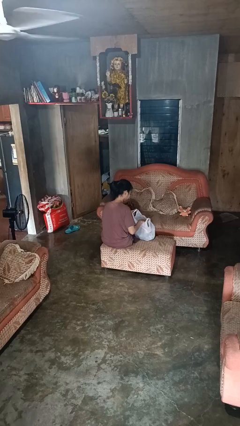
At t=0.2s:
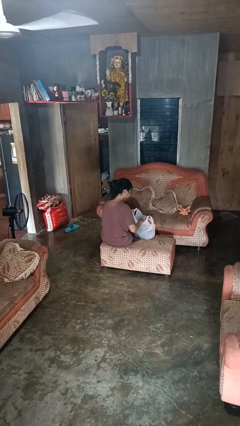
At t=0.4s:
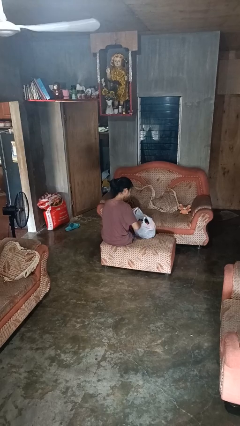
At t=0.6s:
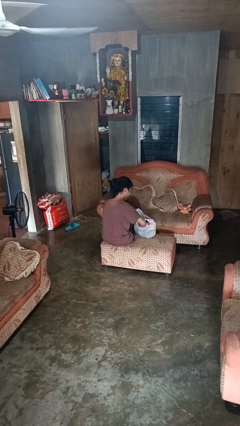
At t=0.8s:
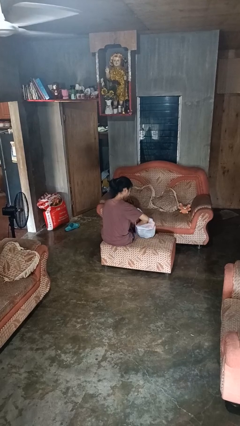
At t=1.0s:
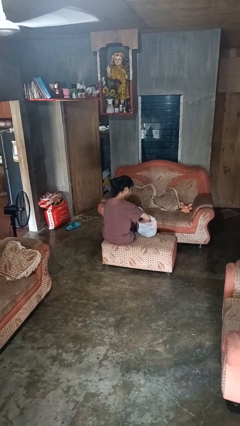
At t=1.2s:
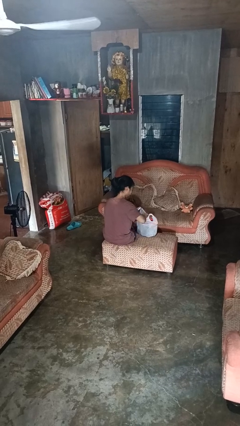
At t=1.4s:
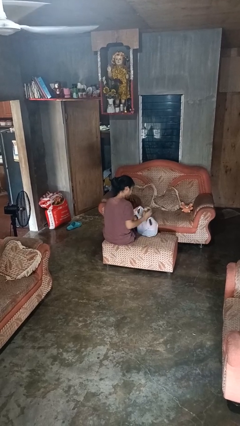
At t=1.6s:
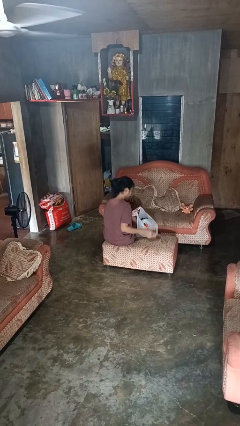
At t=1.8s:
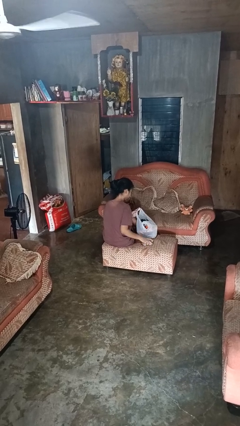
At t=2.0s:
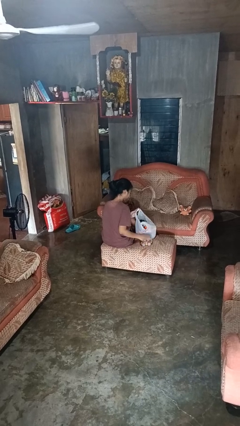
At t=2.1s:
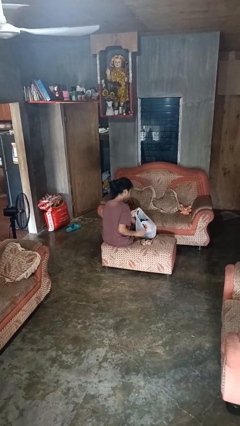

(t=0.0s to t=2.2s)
person takes object from bag

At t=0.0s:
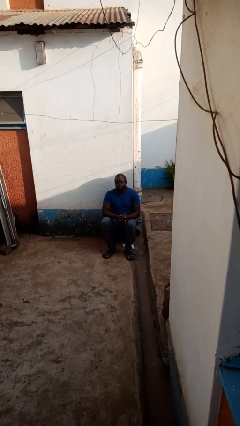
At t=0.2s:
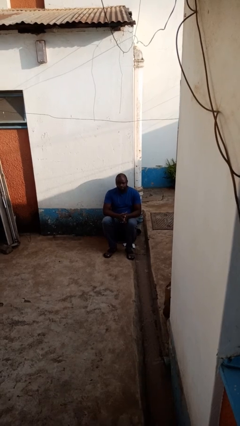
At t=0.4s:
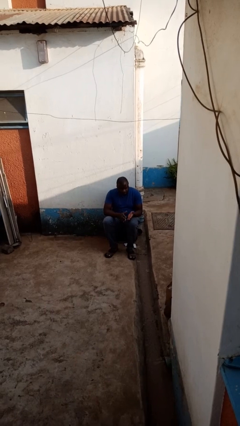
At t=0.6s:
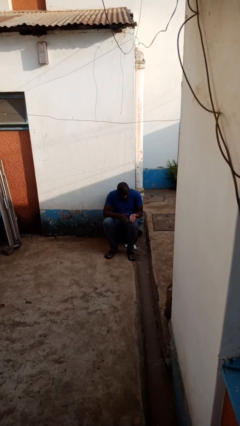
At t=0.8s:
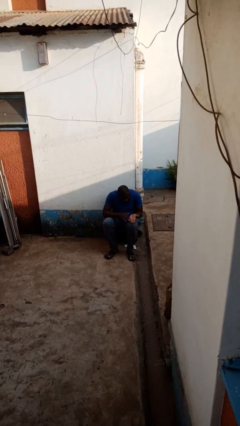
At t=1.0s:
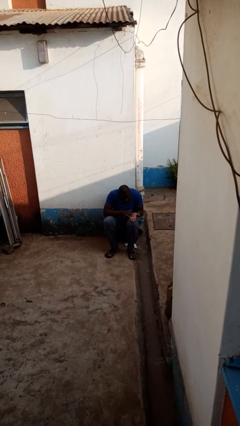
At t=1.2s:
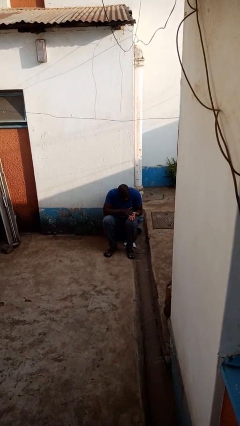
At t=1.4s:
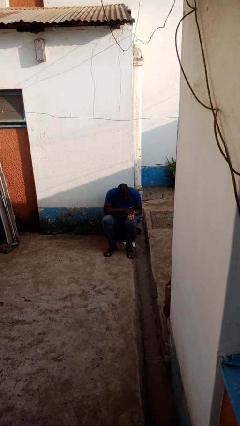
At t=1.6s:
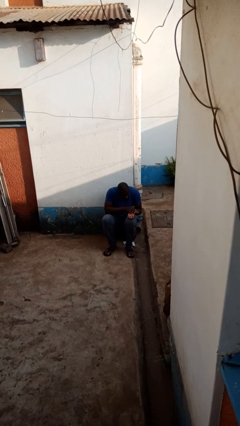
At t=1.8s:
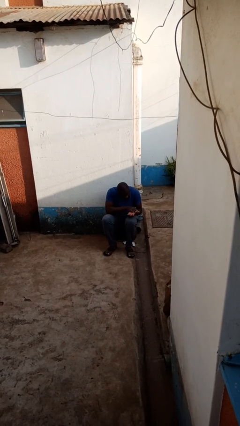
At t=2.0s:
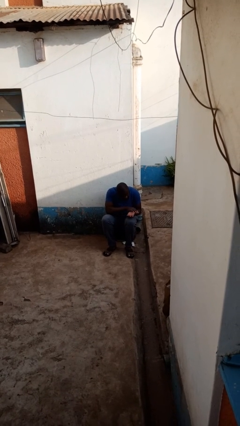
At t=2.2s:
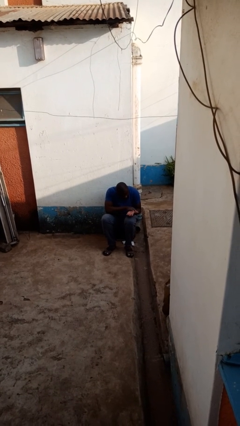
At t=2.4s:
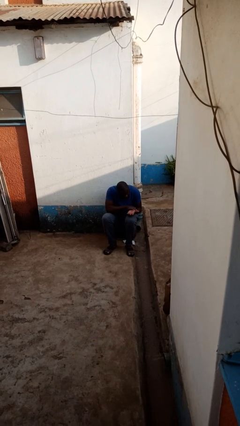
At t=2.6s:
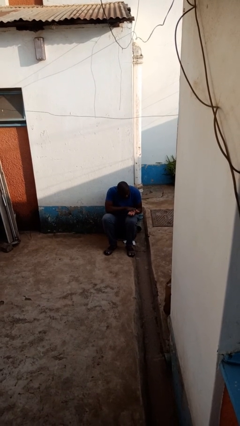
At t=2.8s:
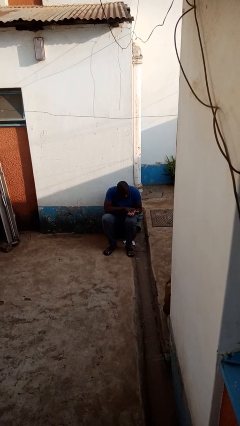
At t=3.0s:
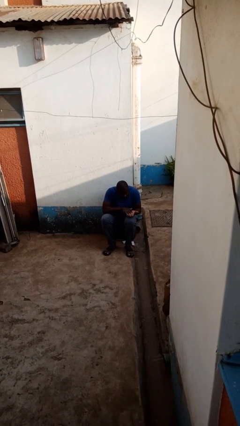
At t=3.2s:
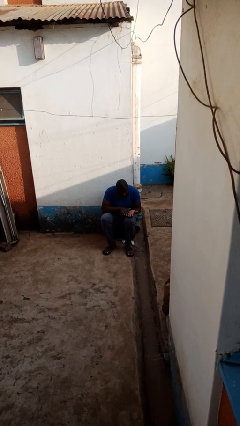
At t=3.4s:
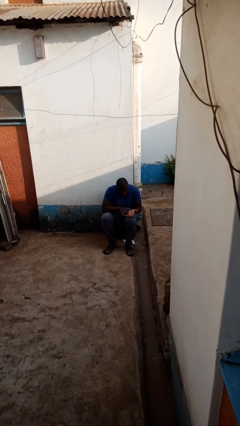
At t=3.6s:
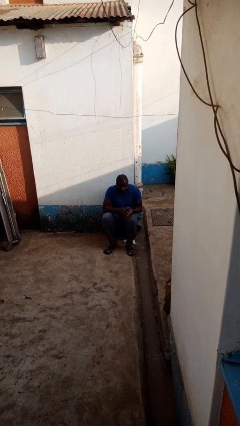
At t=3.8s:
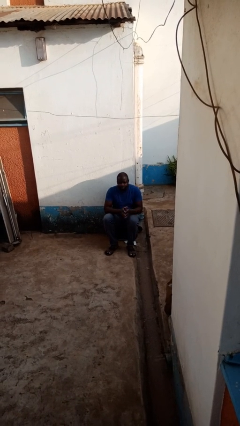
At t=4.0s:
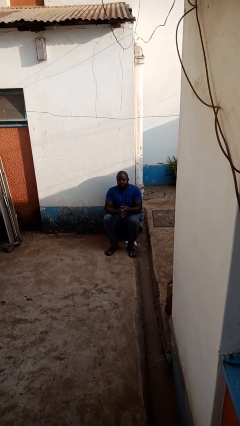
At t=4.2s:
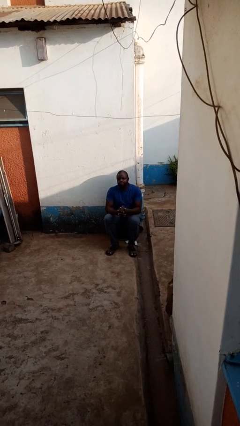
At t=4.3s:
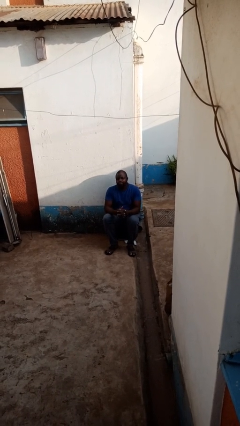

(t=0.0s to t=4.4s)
person looks at hands in lap

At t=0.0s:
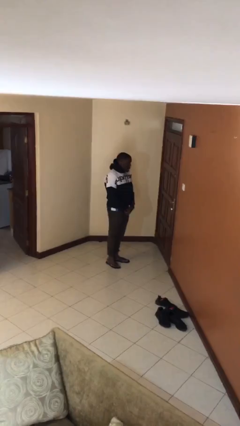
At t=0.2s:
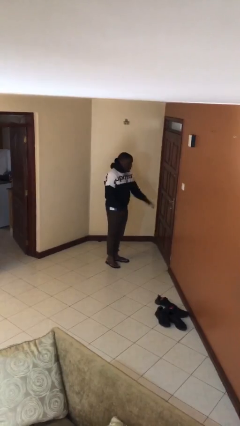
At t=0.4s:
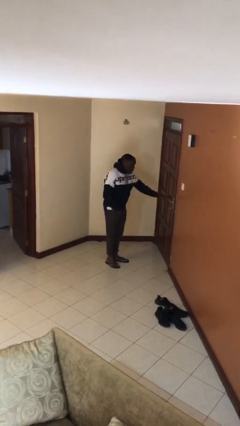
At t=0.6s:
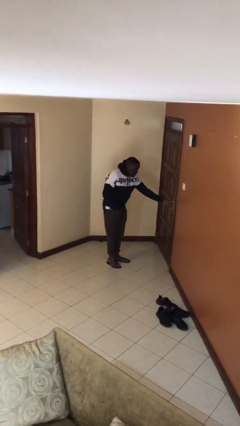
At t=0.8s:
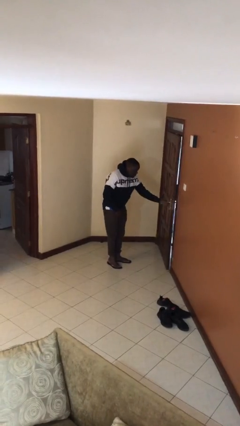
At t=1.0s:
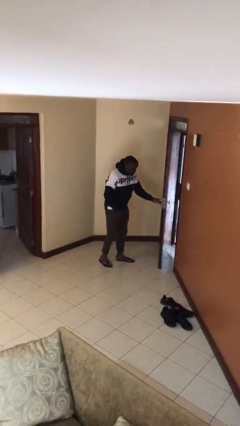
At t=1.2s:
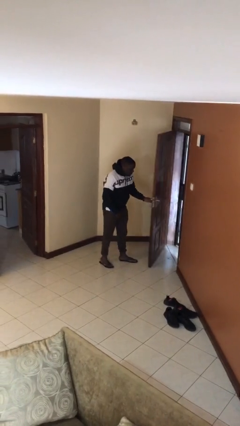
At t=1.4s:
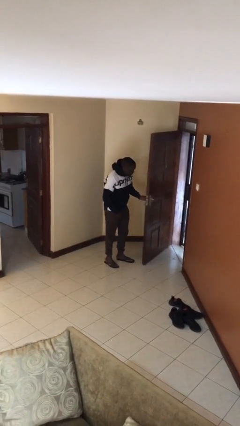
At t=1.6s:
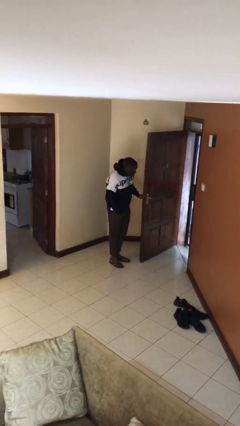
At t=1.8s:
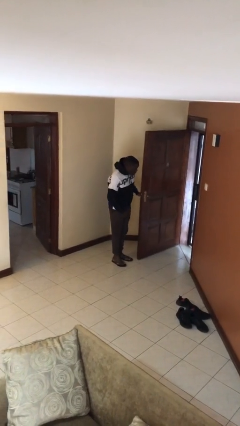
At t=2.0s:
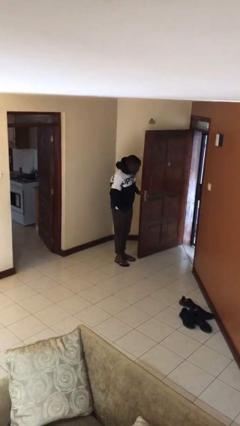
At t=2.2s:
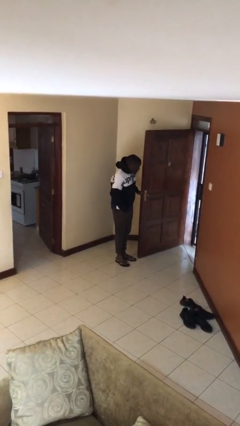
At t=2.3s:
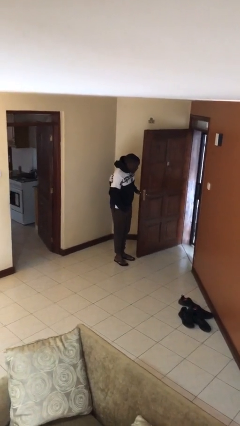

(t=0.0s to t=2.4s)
person opens facility door

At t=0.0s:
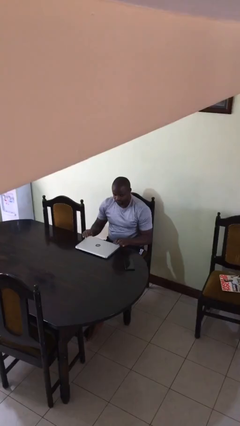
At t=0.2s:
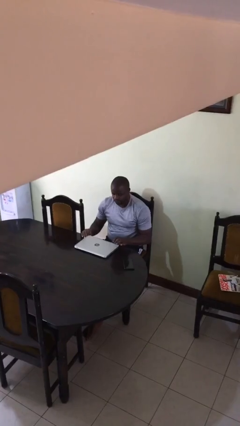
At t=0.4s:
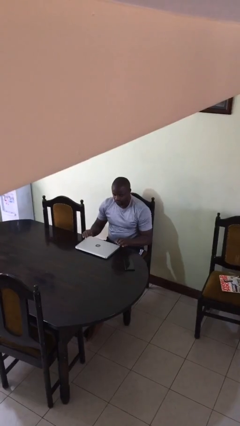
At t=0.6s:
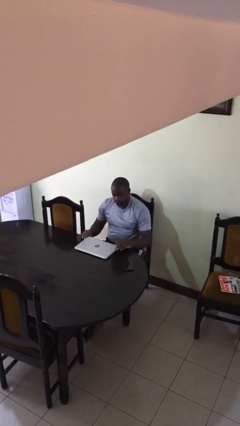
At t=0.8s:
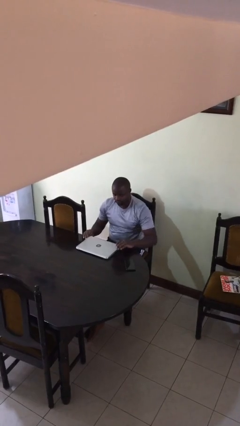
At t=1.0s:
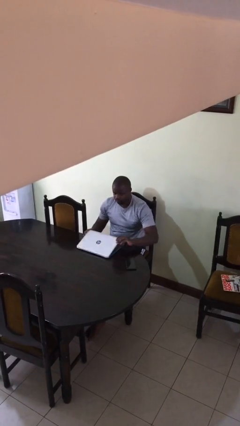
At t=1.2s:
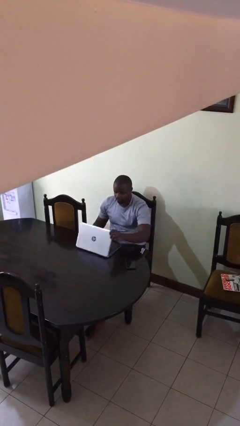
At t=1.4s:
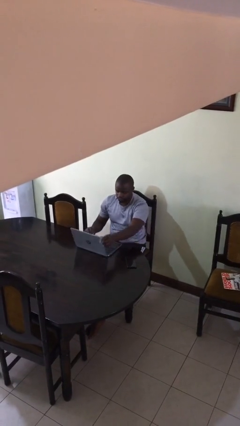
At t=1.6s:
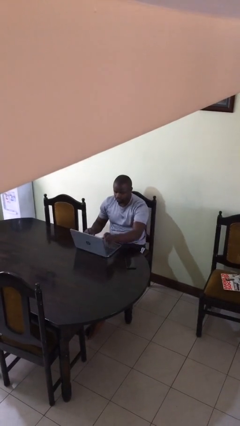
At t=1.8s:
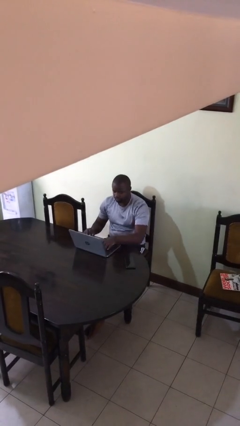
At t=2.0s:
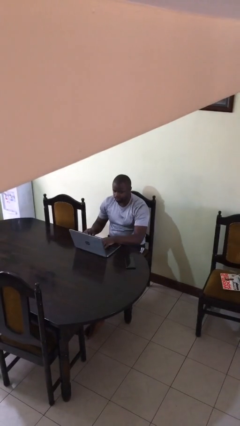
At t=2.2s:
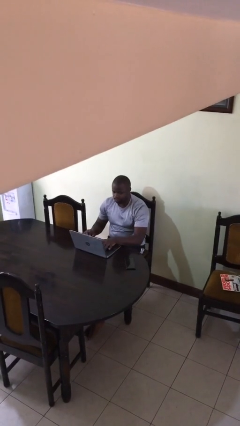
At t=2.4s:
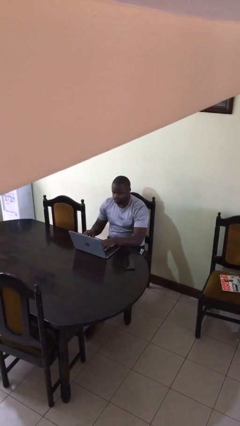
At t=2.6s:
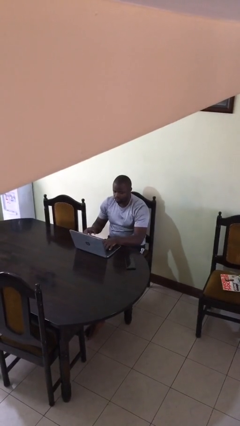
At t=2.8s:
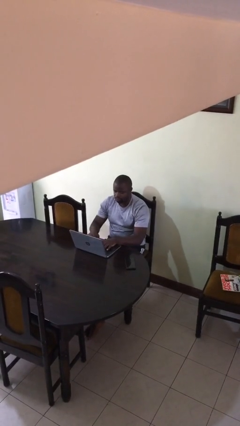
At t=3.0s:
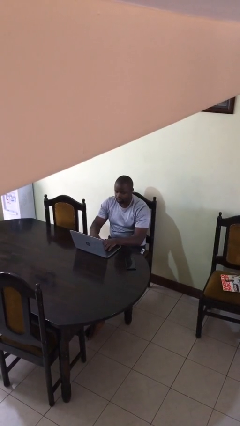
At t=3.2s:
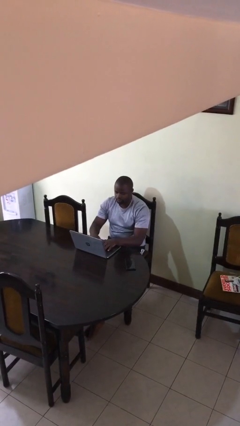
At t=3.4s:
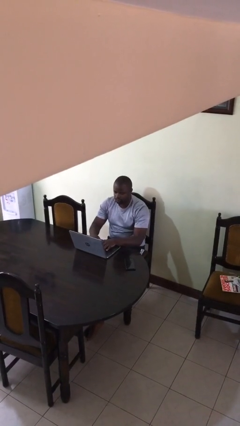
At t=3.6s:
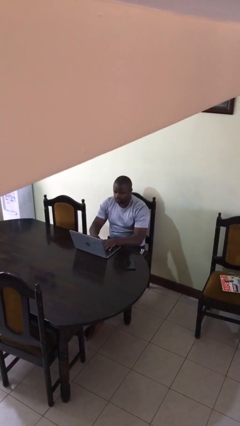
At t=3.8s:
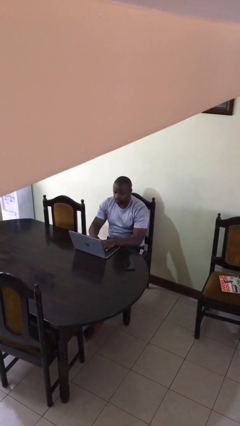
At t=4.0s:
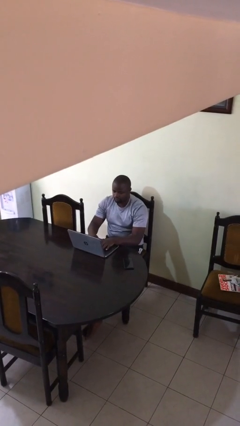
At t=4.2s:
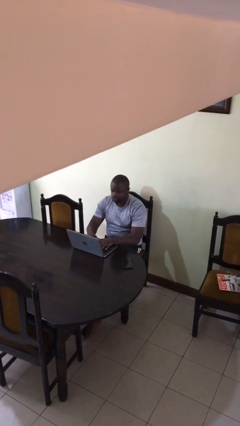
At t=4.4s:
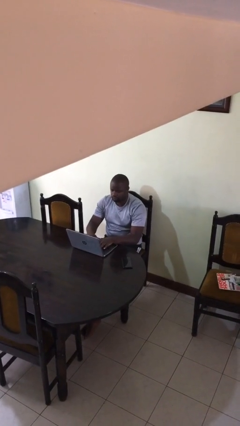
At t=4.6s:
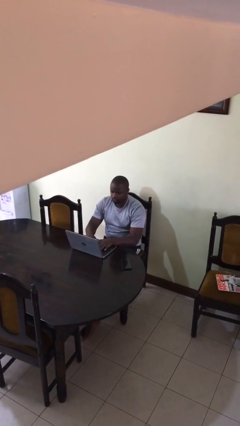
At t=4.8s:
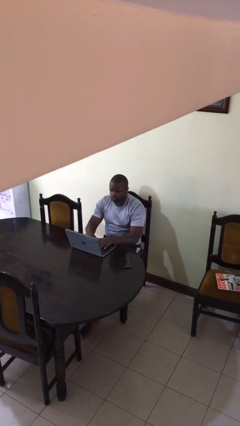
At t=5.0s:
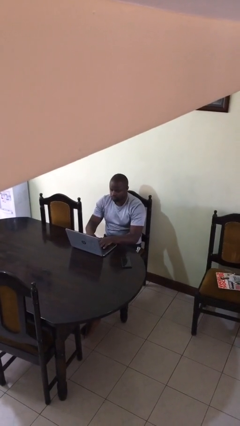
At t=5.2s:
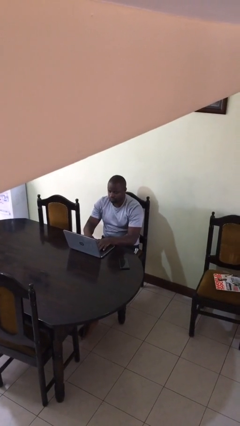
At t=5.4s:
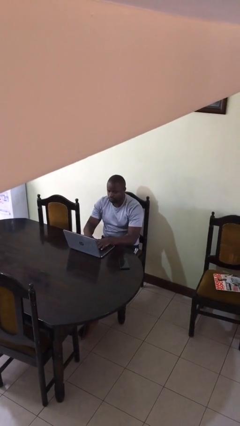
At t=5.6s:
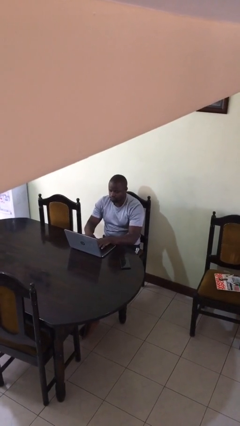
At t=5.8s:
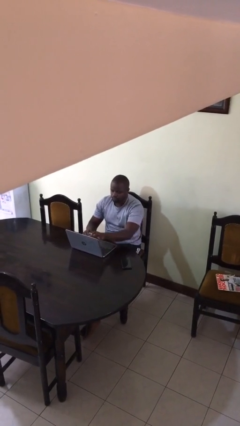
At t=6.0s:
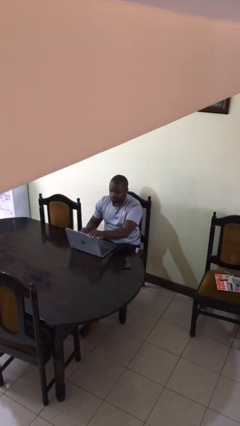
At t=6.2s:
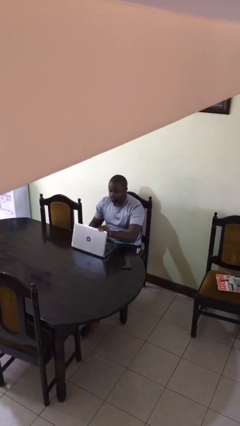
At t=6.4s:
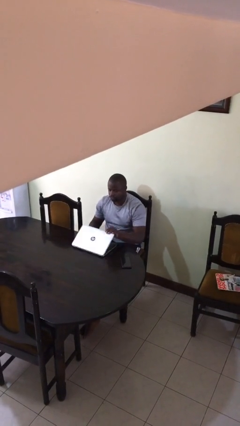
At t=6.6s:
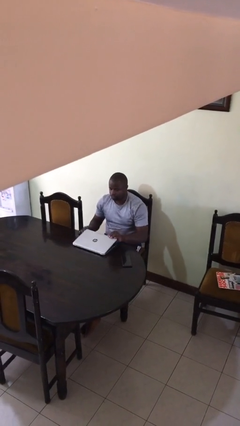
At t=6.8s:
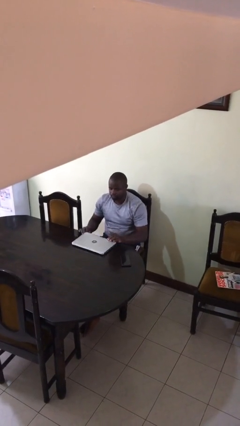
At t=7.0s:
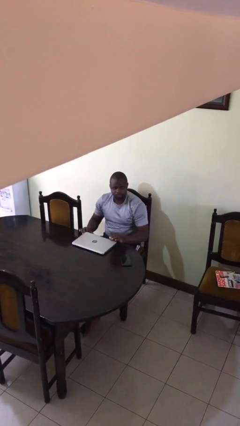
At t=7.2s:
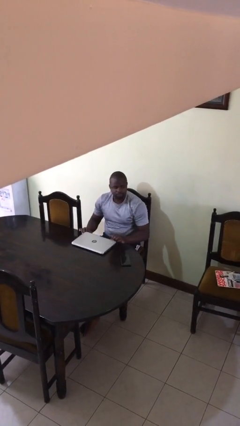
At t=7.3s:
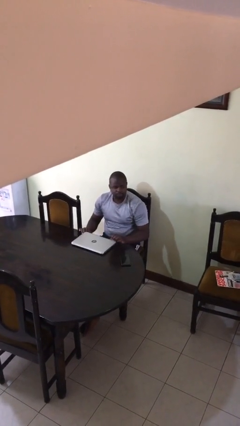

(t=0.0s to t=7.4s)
person interacts with laptop

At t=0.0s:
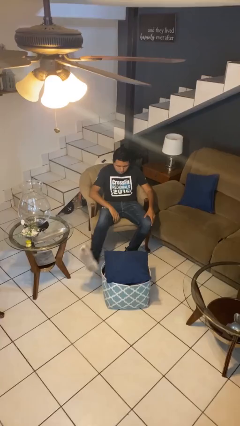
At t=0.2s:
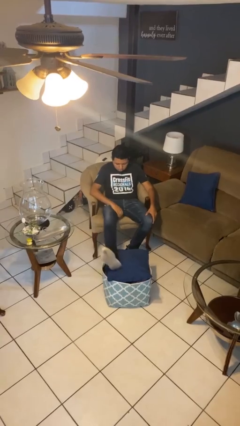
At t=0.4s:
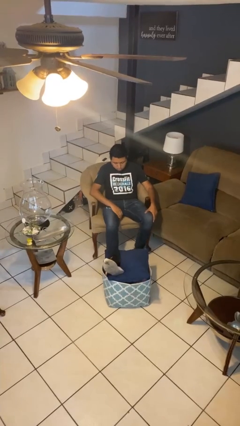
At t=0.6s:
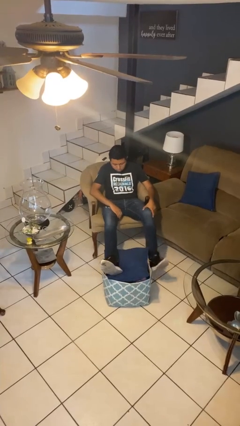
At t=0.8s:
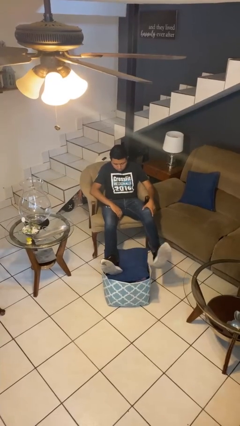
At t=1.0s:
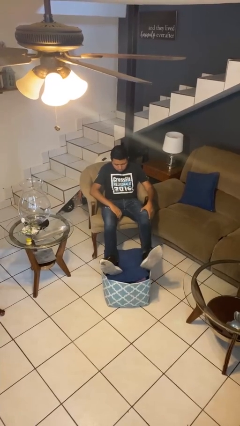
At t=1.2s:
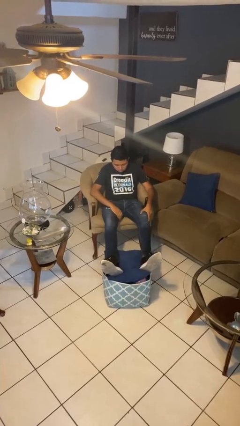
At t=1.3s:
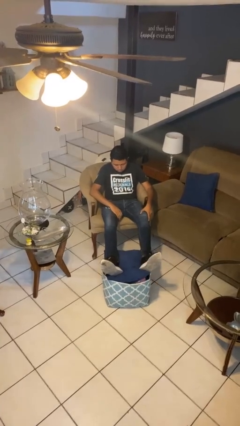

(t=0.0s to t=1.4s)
person puts feet up
